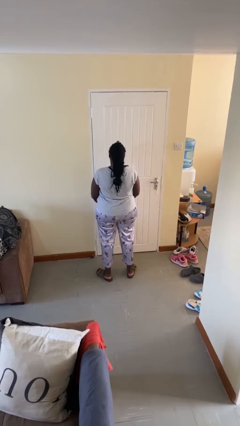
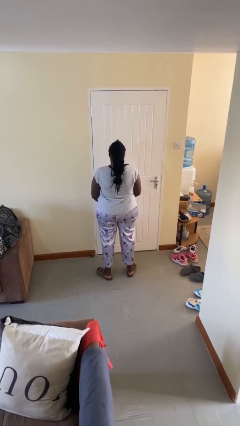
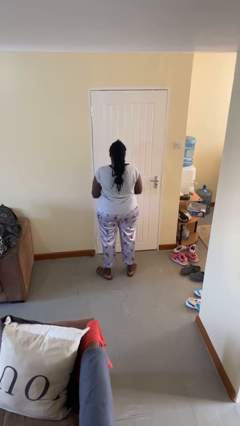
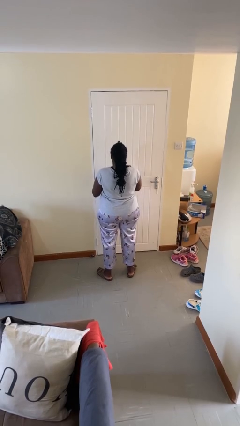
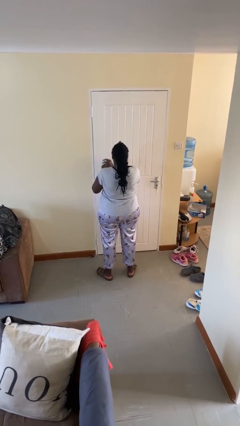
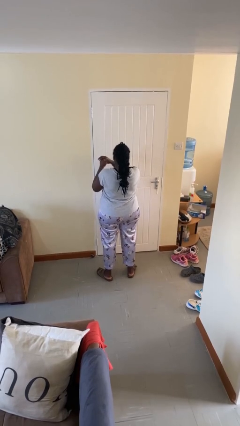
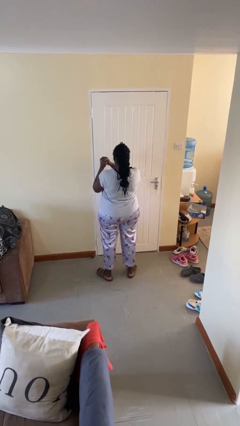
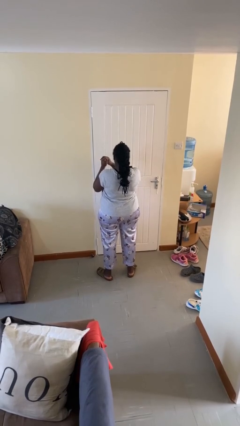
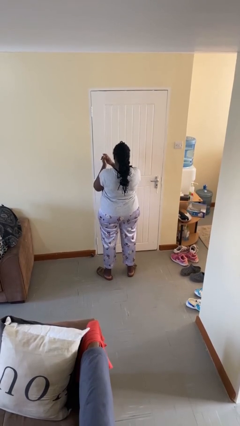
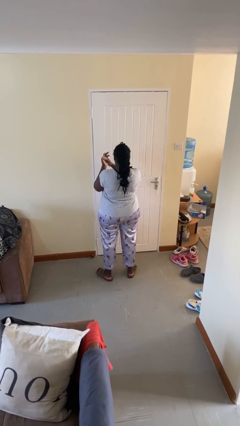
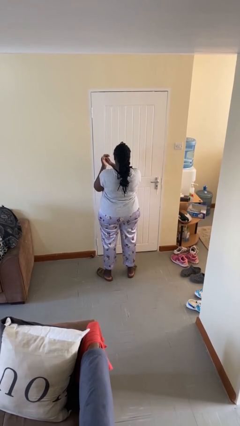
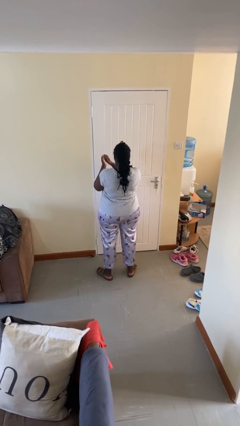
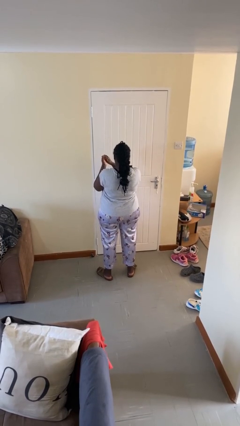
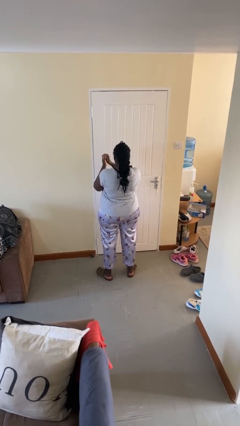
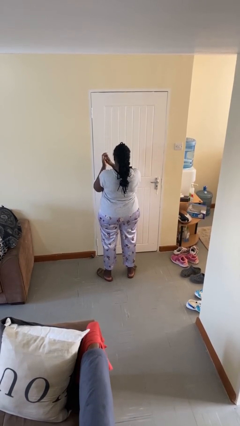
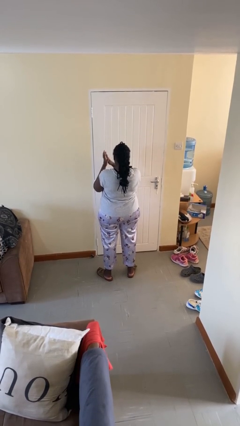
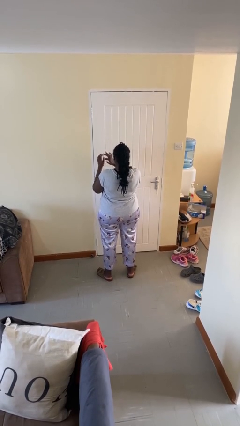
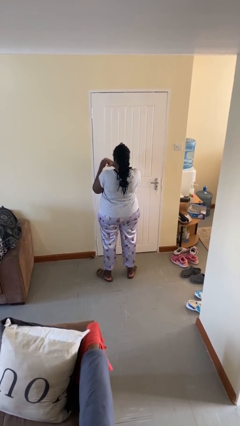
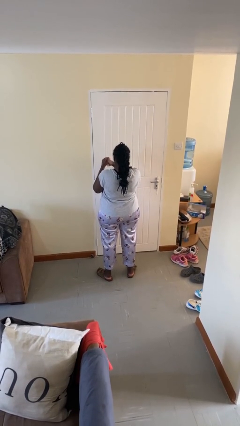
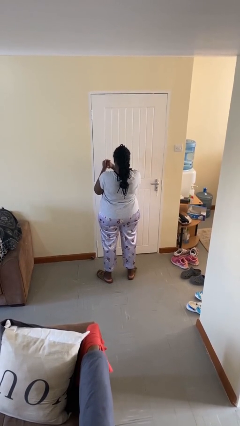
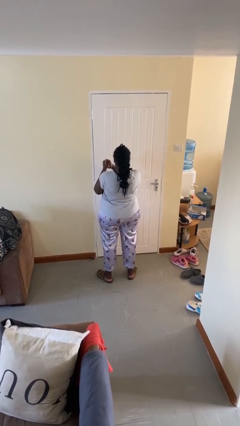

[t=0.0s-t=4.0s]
person cracks knuckles

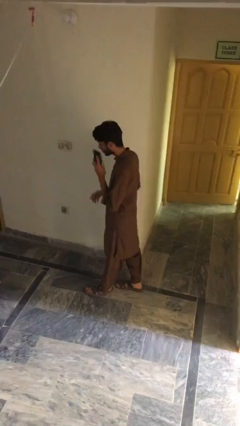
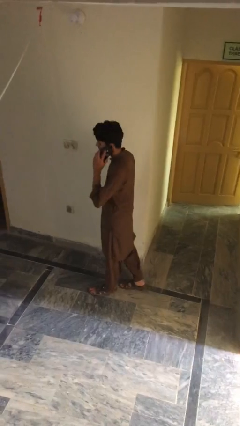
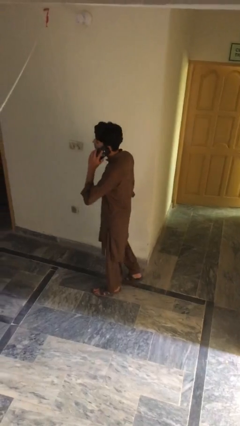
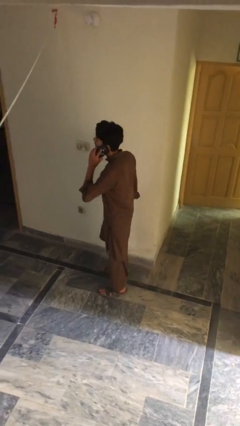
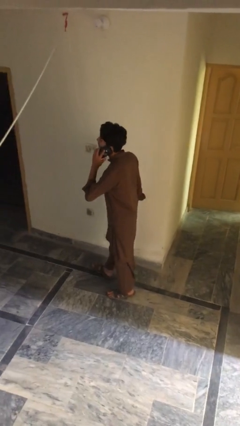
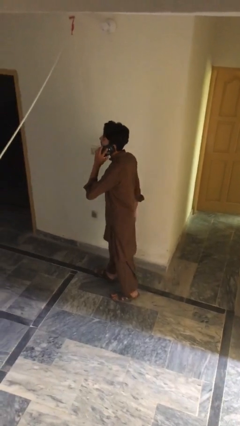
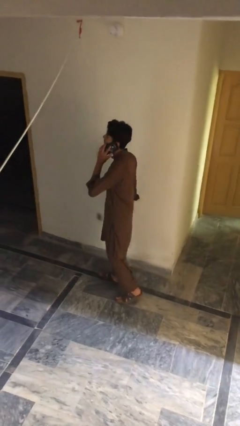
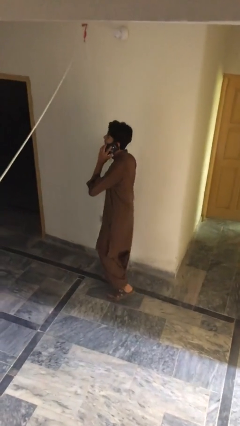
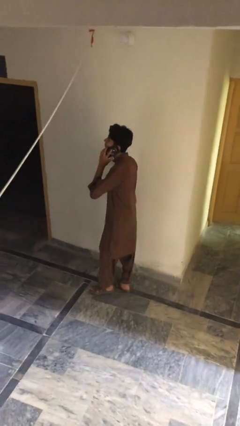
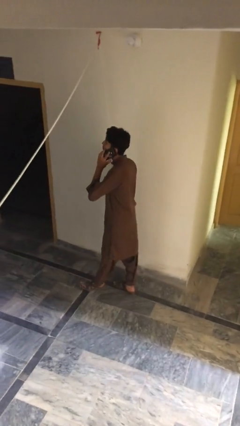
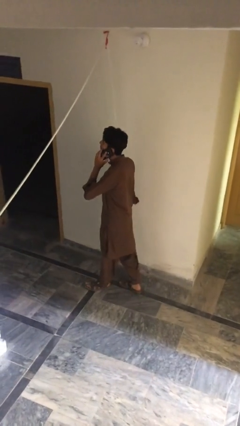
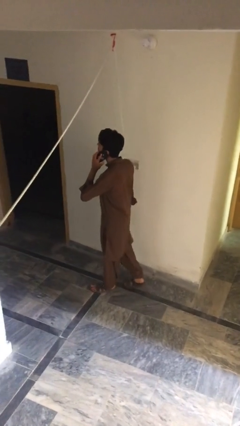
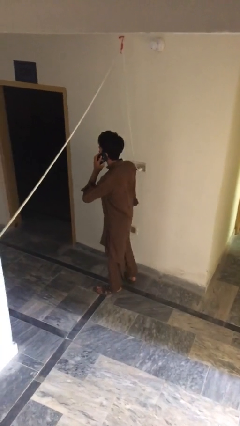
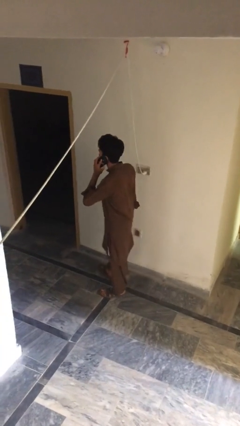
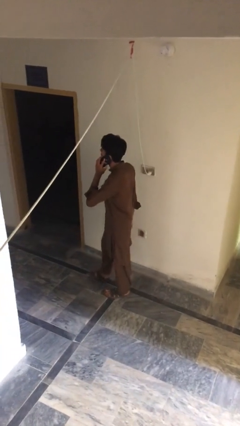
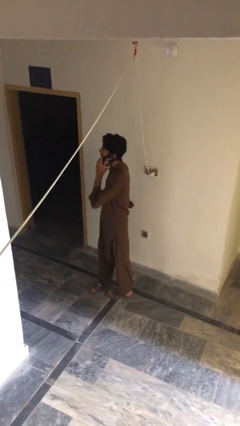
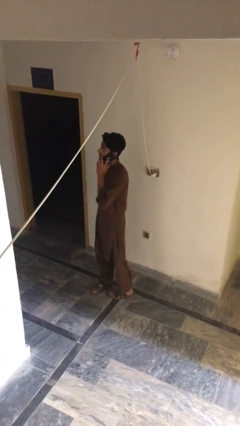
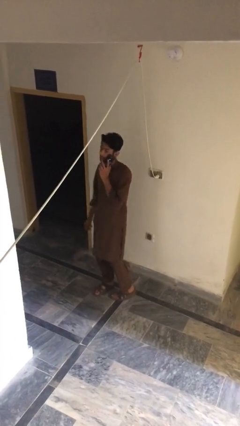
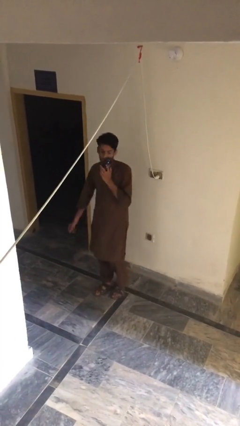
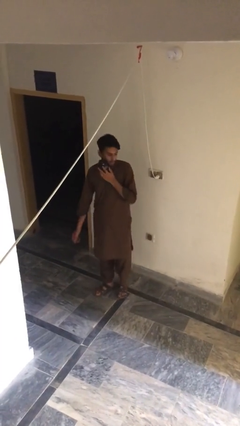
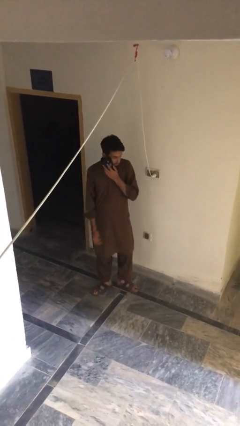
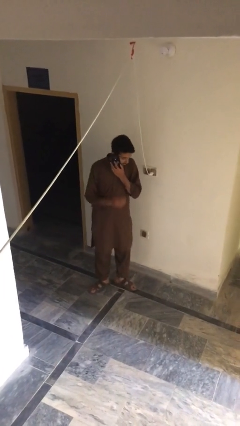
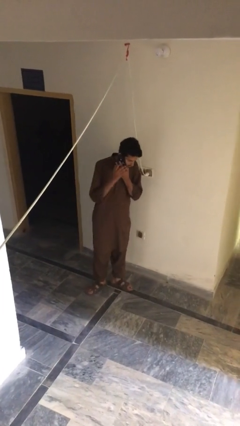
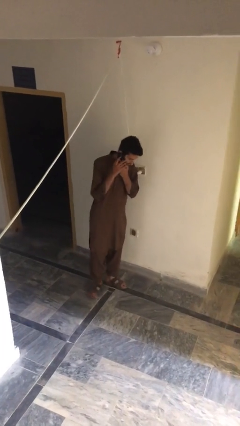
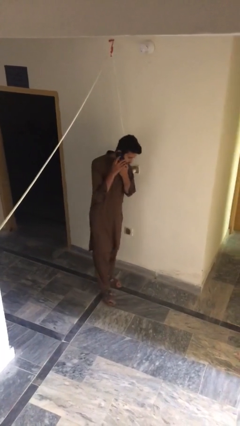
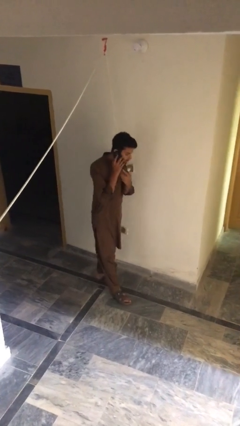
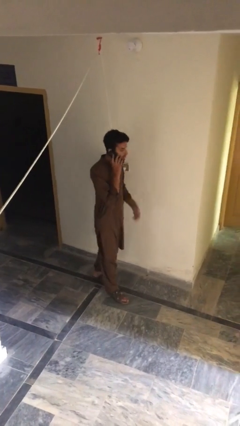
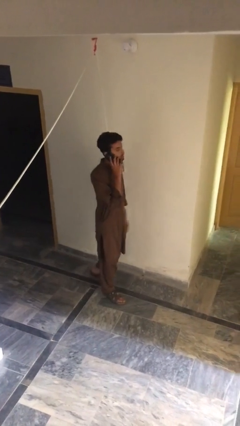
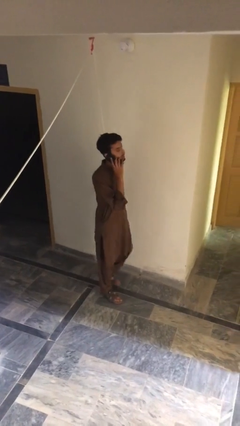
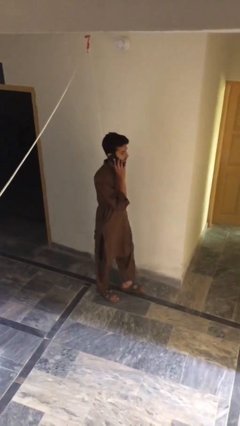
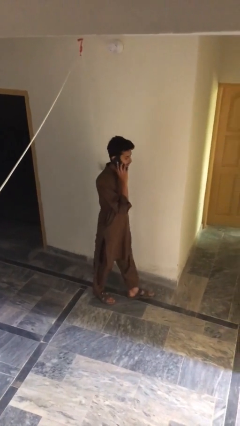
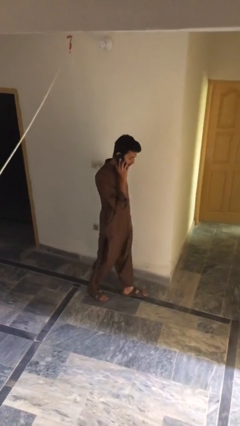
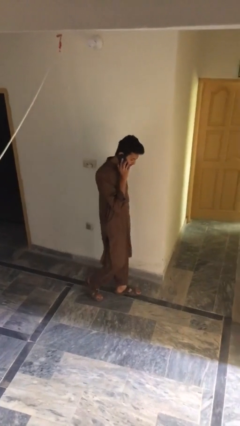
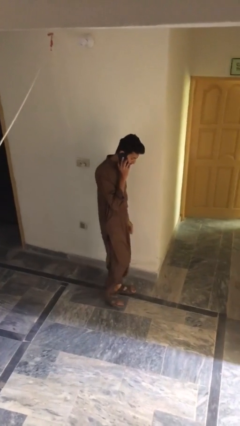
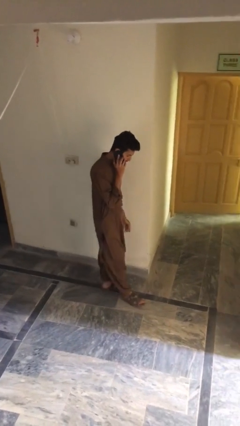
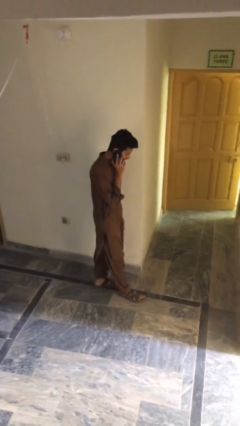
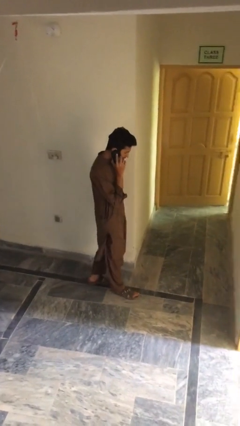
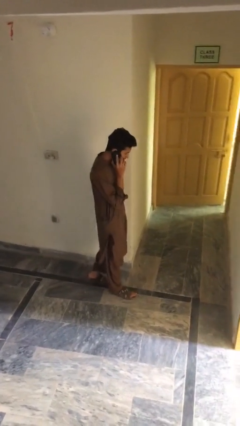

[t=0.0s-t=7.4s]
person talks on phone

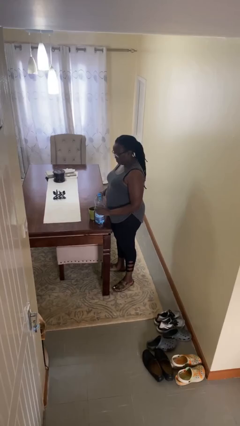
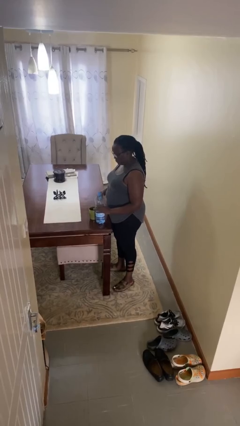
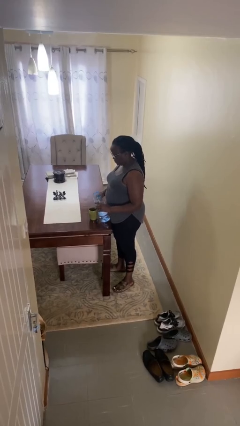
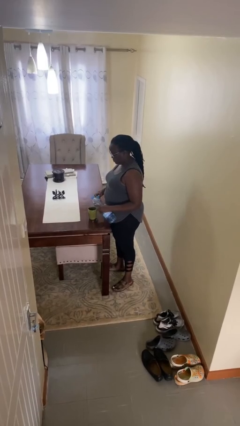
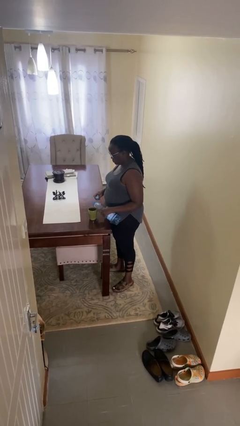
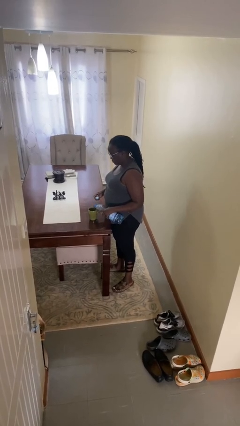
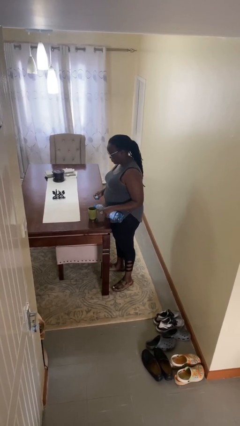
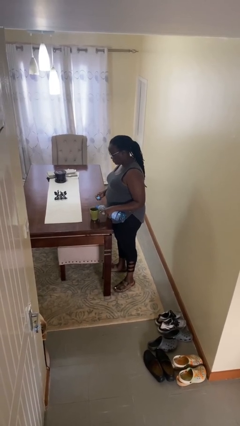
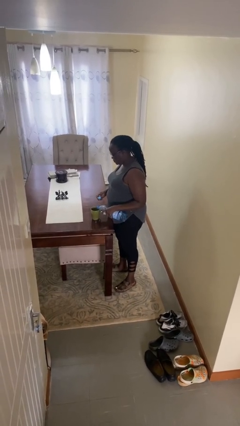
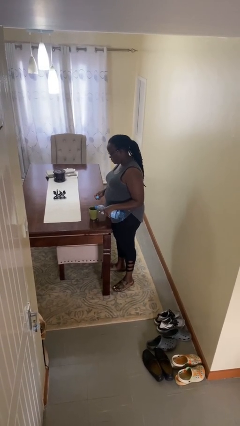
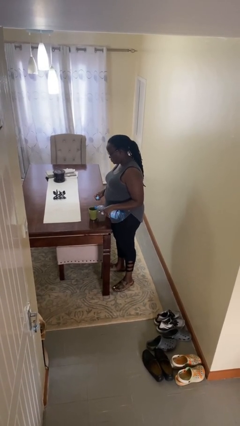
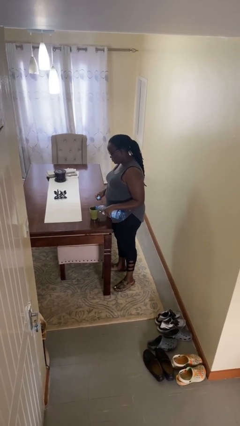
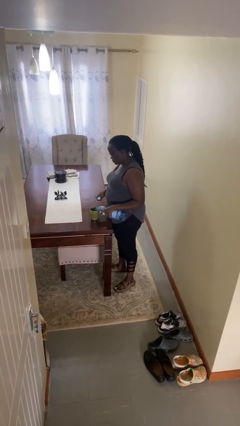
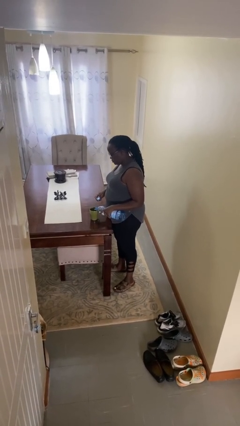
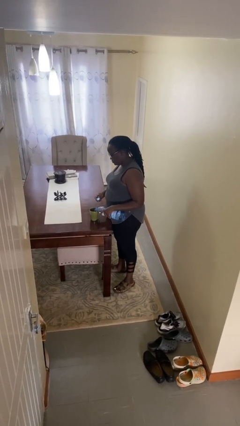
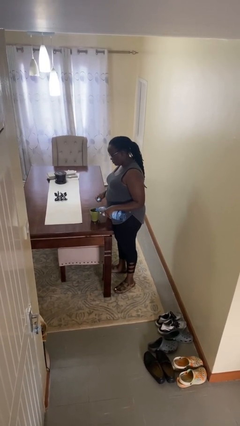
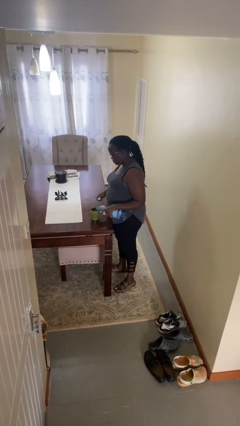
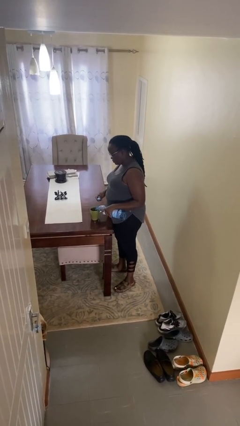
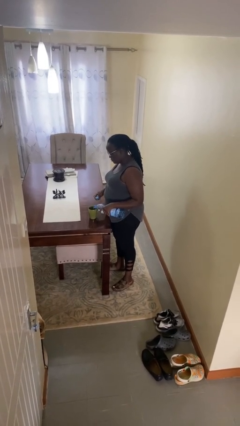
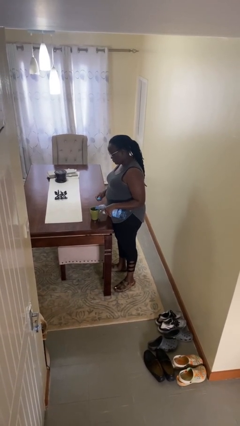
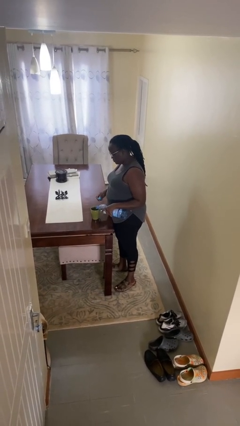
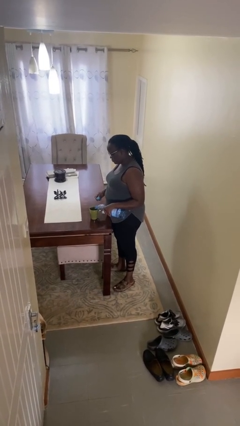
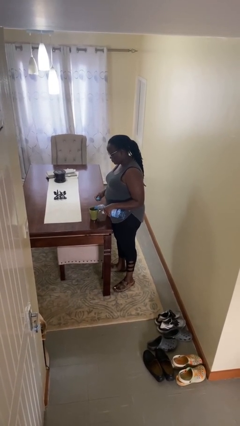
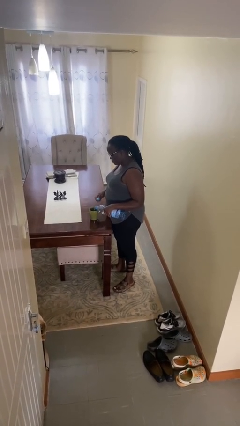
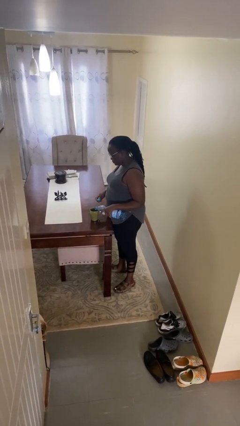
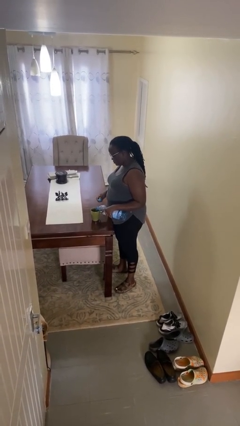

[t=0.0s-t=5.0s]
person pours liquid into cup

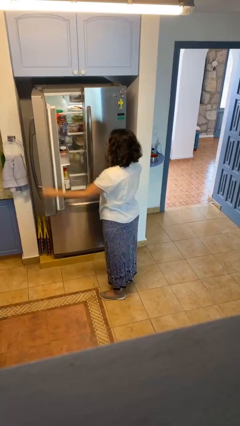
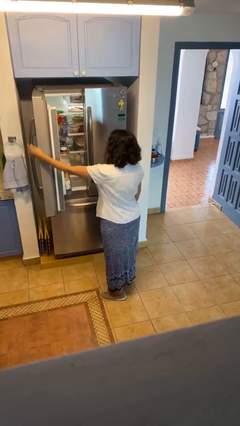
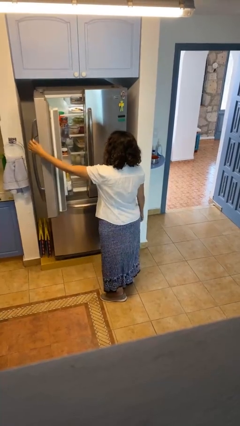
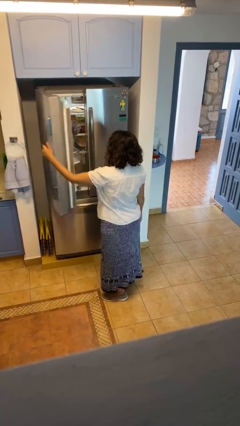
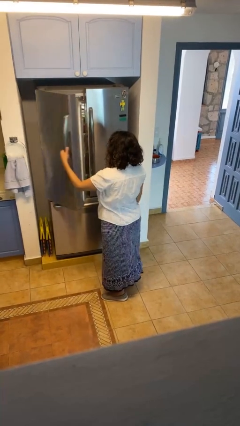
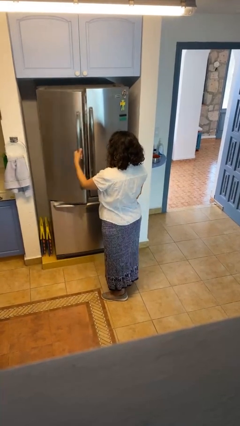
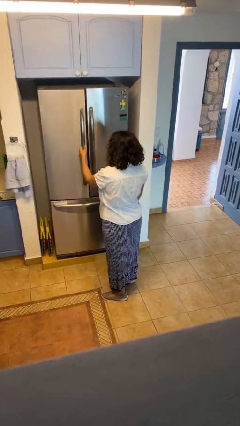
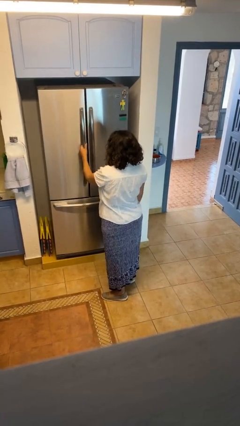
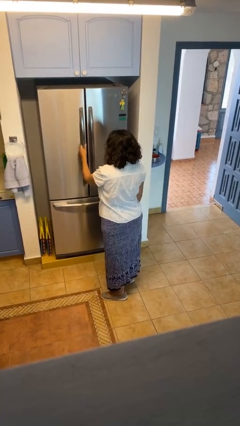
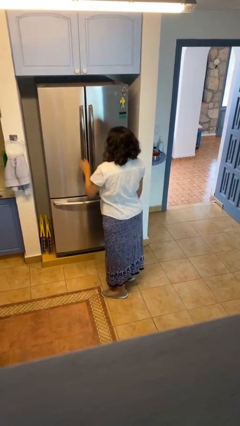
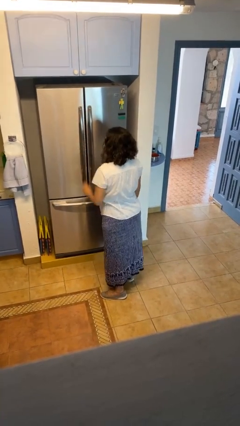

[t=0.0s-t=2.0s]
person closes refrigerator
